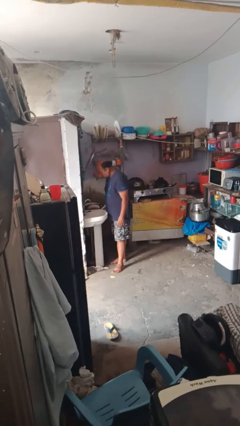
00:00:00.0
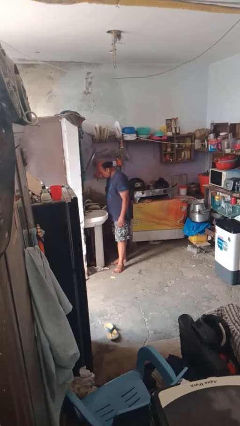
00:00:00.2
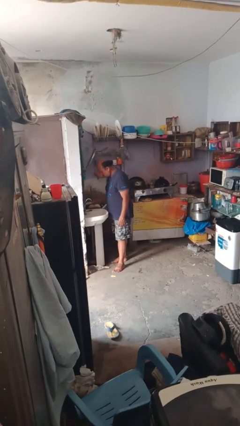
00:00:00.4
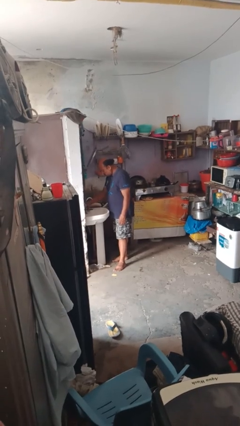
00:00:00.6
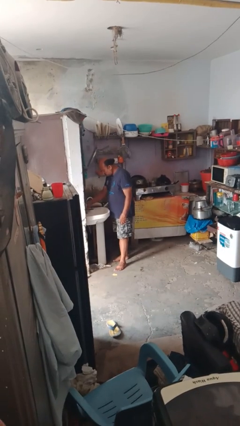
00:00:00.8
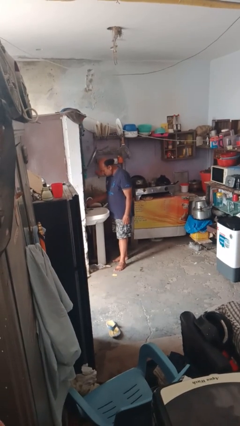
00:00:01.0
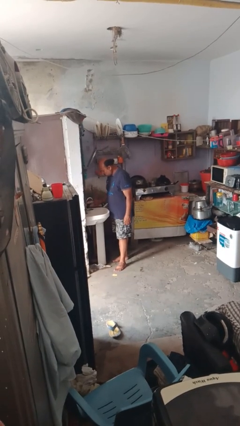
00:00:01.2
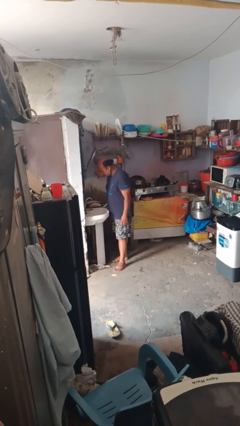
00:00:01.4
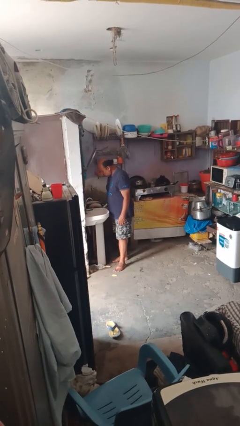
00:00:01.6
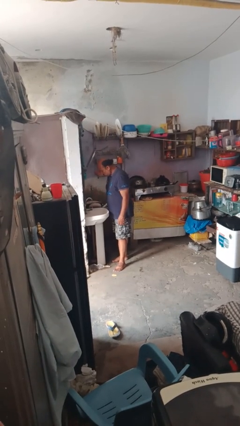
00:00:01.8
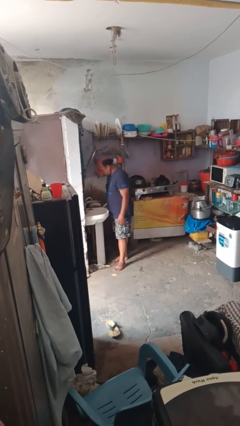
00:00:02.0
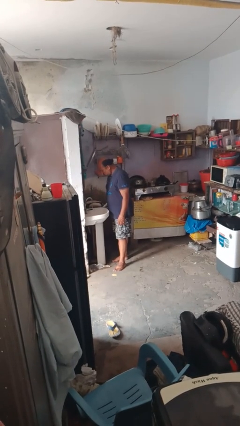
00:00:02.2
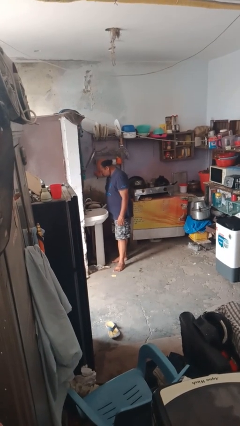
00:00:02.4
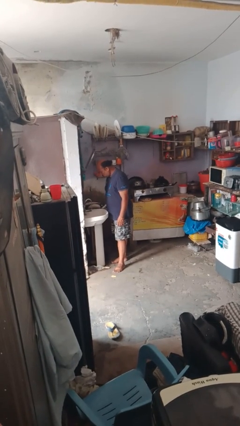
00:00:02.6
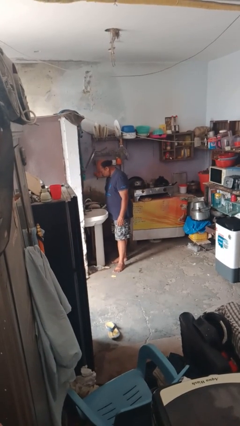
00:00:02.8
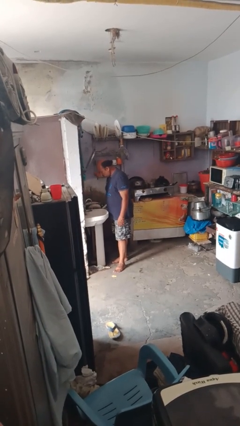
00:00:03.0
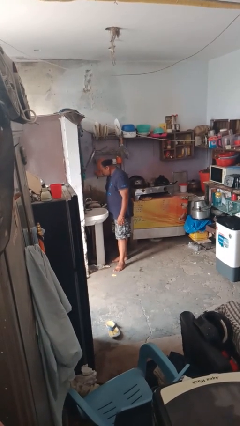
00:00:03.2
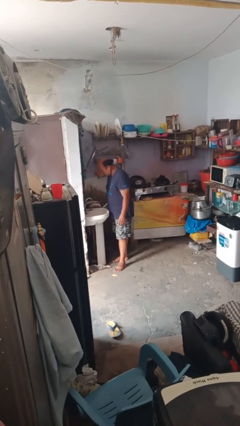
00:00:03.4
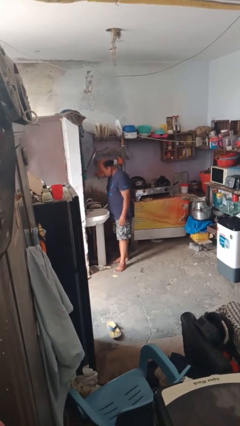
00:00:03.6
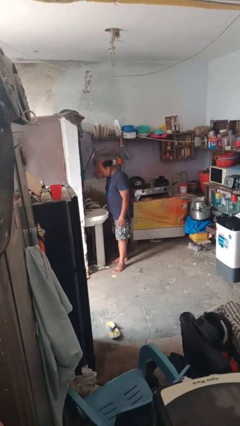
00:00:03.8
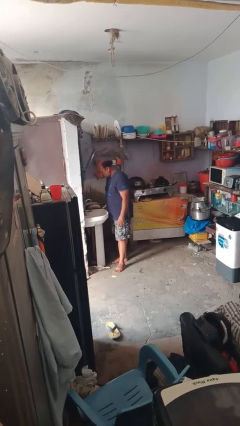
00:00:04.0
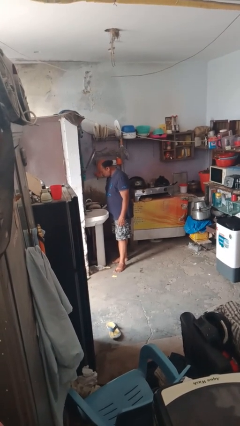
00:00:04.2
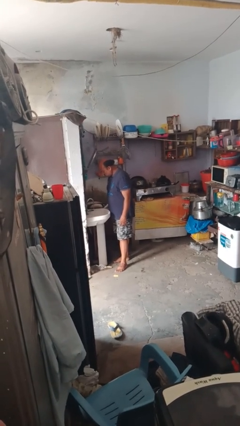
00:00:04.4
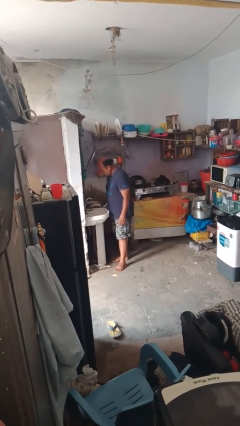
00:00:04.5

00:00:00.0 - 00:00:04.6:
person turns on faucet

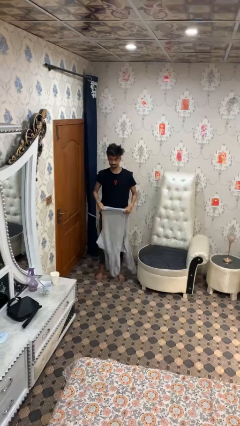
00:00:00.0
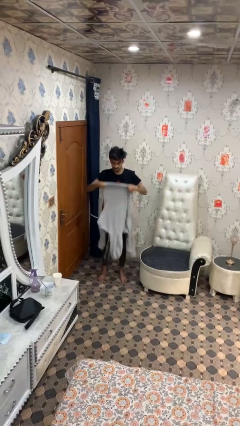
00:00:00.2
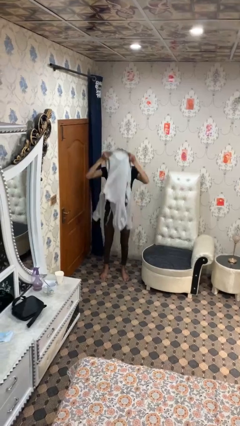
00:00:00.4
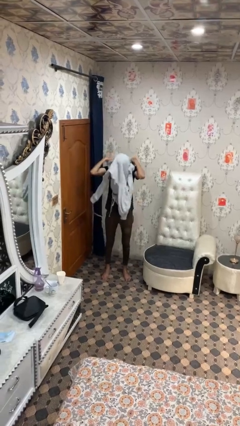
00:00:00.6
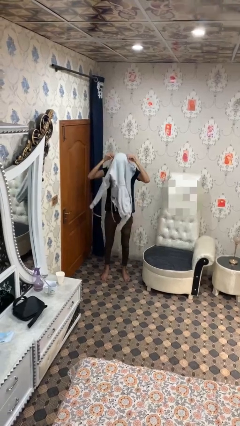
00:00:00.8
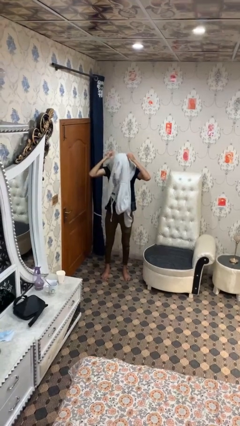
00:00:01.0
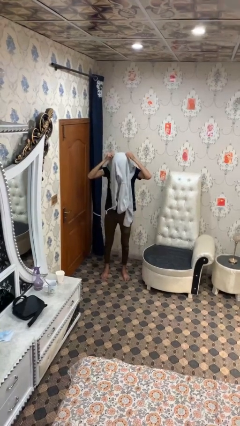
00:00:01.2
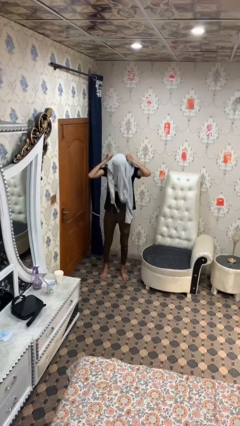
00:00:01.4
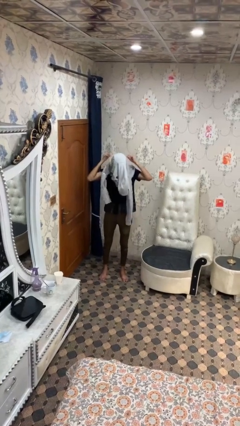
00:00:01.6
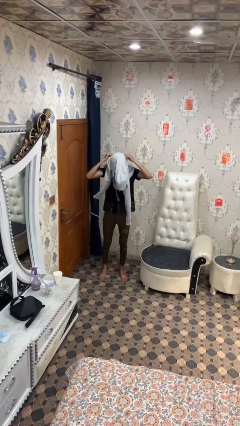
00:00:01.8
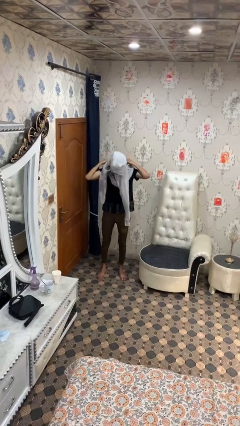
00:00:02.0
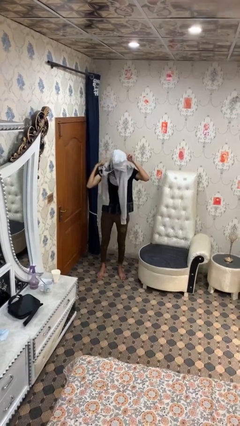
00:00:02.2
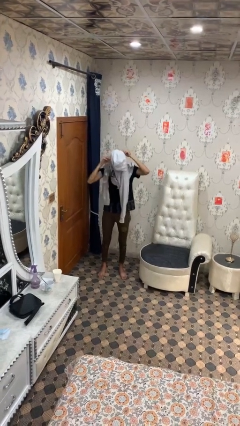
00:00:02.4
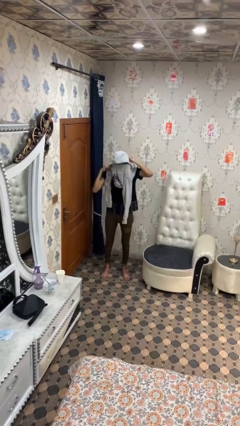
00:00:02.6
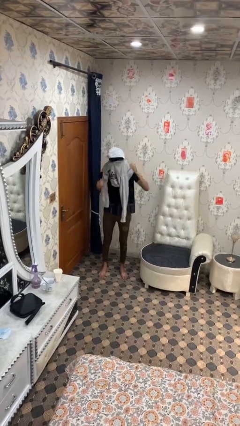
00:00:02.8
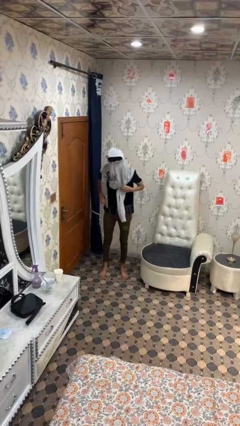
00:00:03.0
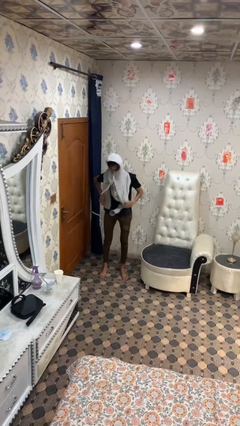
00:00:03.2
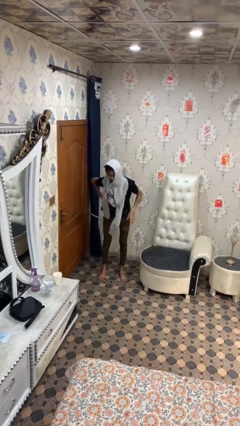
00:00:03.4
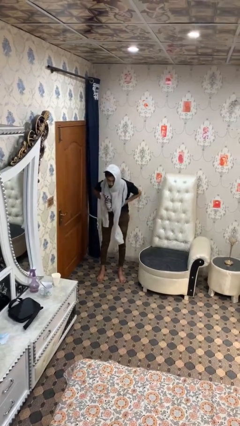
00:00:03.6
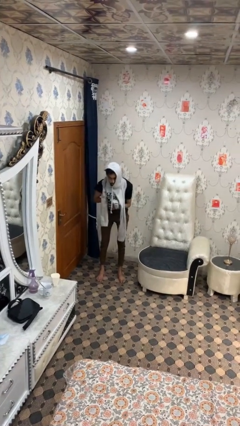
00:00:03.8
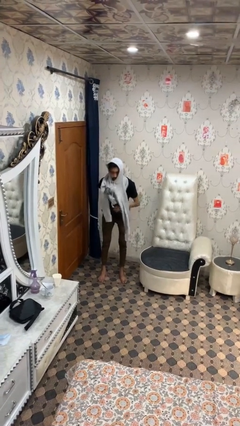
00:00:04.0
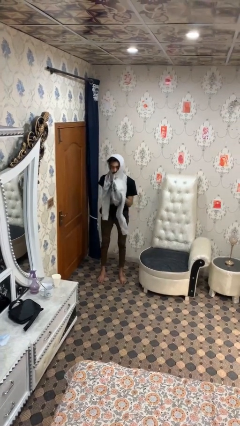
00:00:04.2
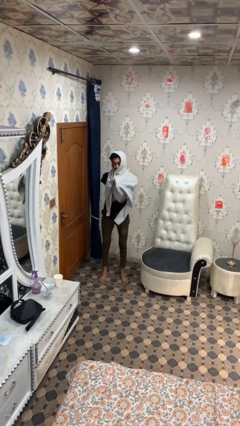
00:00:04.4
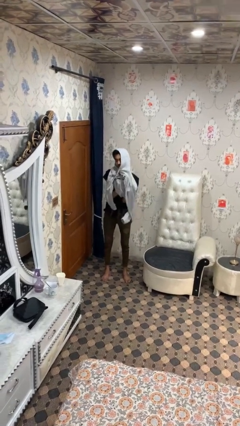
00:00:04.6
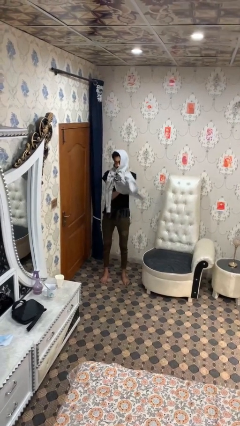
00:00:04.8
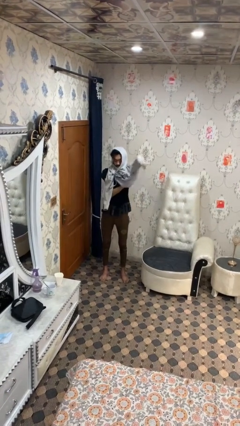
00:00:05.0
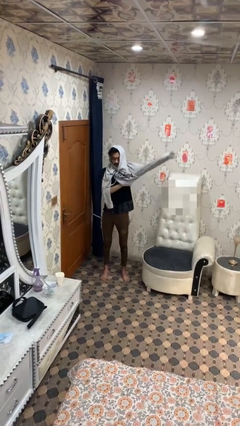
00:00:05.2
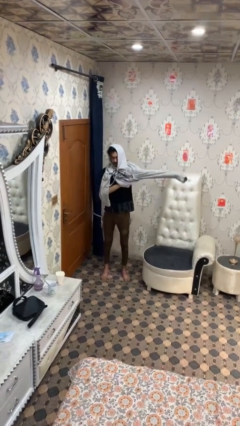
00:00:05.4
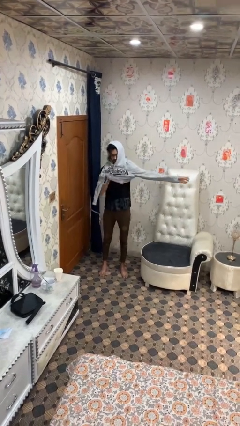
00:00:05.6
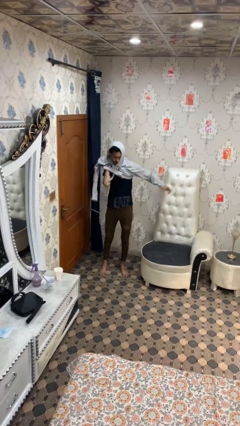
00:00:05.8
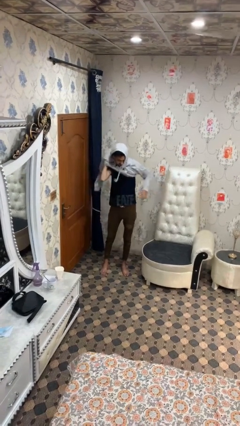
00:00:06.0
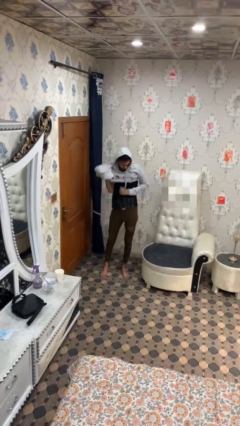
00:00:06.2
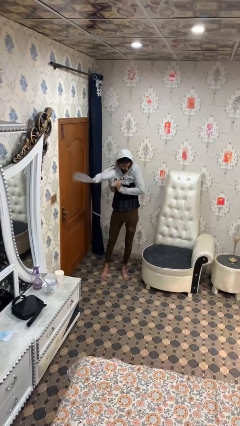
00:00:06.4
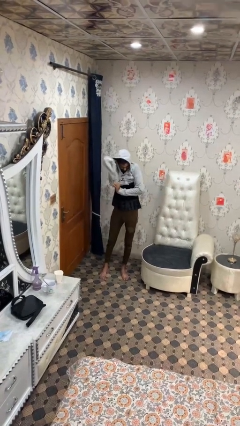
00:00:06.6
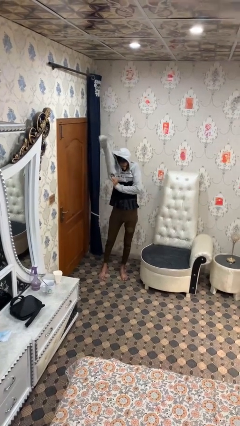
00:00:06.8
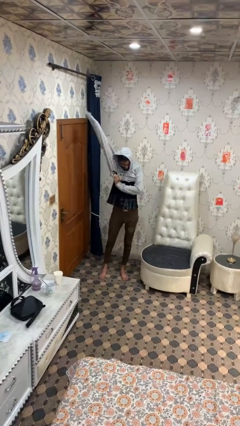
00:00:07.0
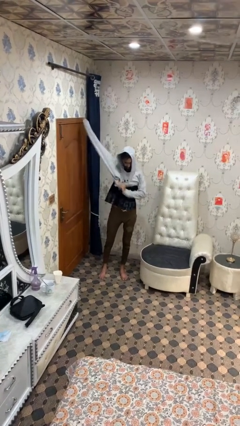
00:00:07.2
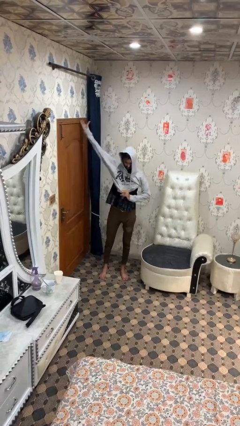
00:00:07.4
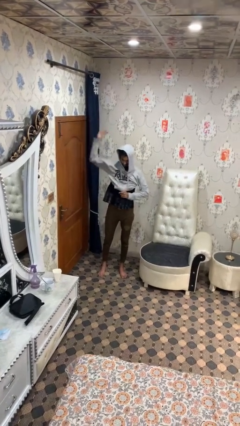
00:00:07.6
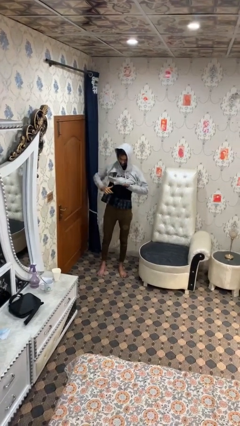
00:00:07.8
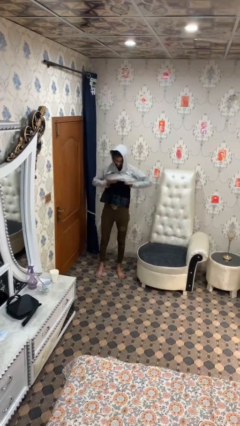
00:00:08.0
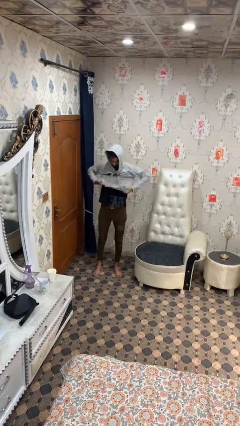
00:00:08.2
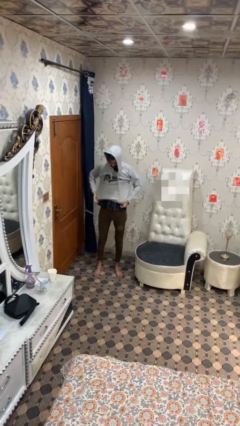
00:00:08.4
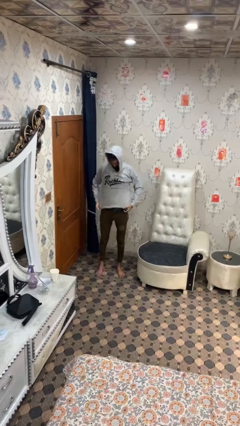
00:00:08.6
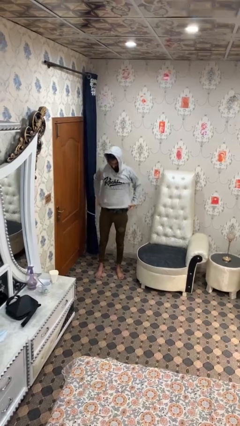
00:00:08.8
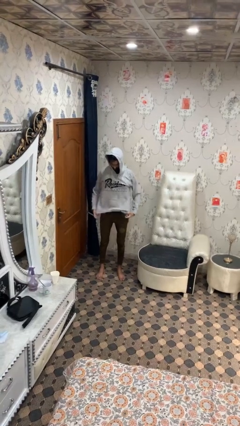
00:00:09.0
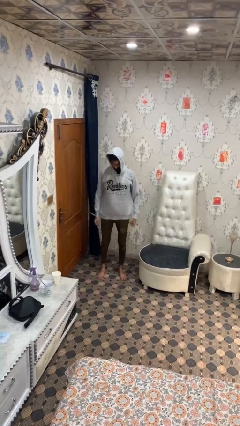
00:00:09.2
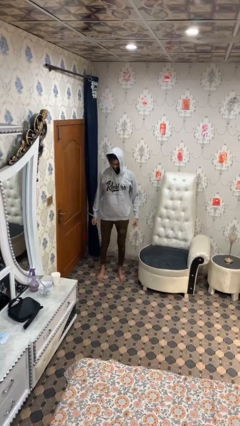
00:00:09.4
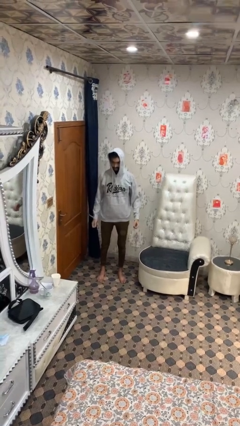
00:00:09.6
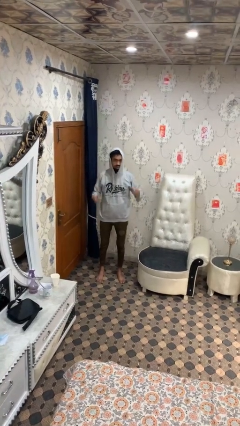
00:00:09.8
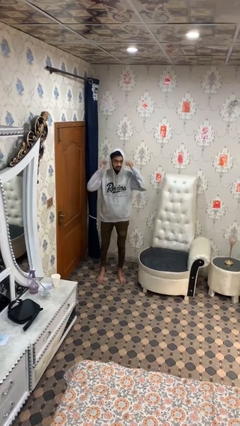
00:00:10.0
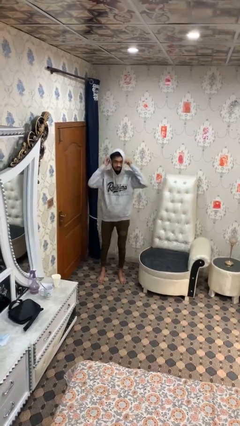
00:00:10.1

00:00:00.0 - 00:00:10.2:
person puts on hoodie

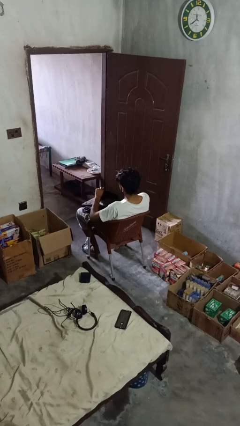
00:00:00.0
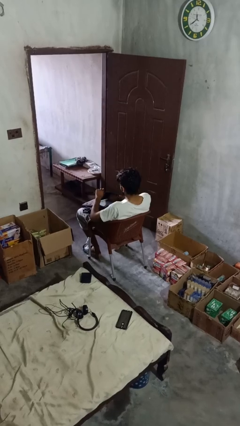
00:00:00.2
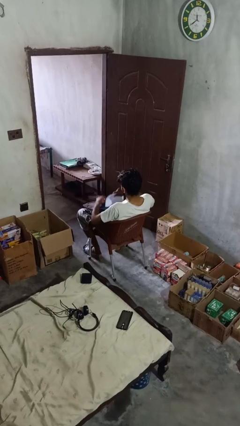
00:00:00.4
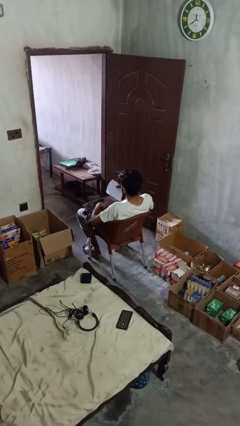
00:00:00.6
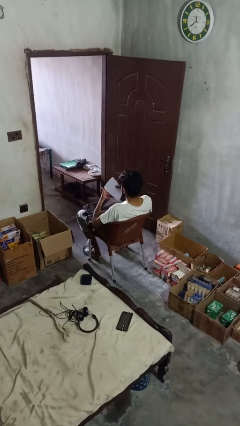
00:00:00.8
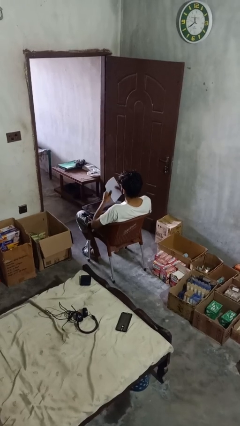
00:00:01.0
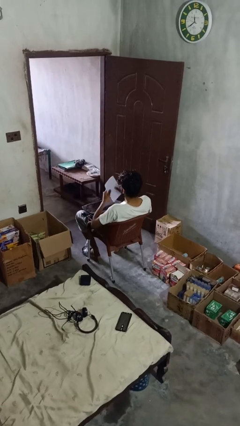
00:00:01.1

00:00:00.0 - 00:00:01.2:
person takes object from backpack

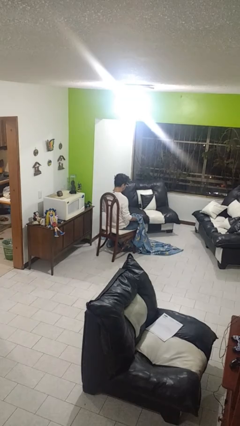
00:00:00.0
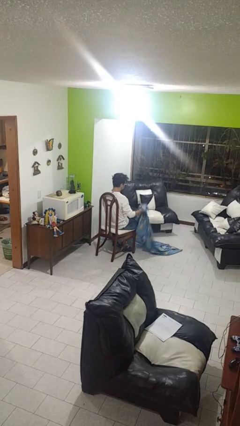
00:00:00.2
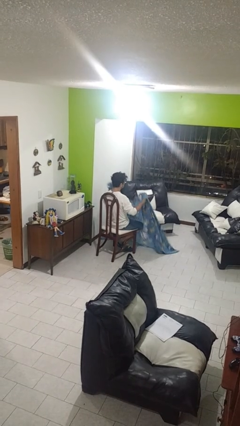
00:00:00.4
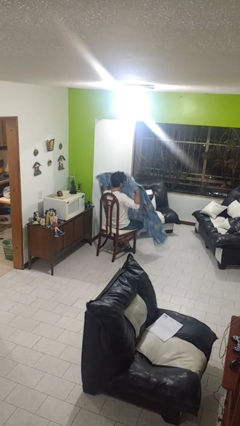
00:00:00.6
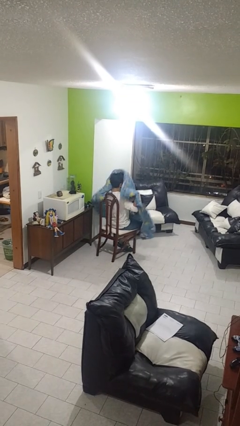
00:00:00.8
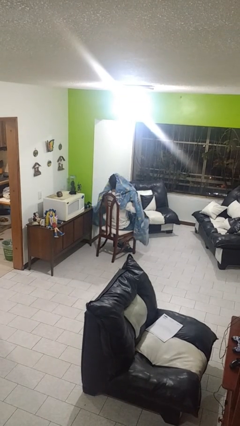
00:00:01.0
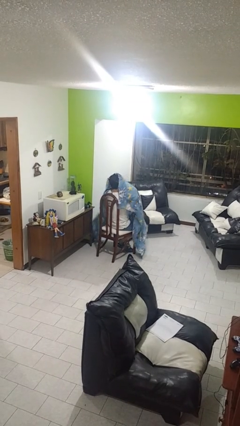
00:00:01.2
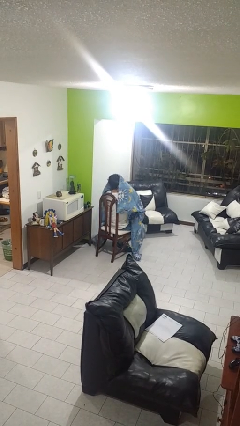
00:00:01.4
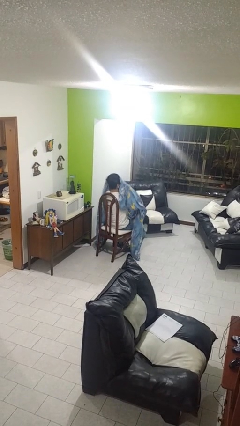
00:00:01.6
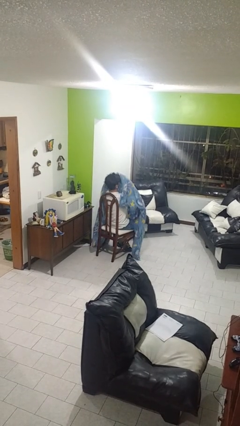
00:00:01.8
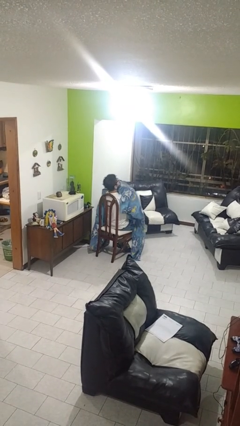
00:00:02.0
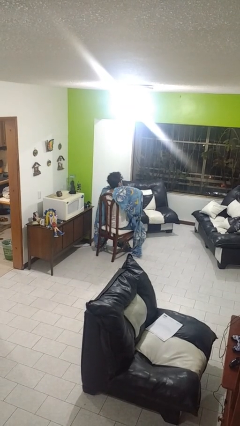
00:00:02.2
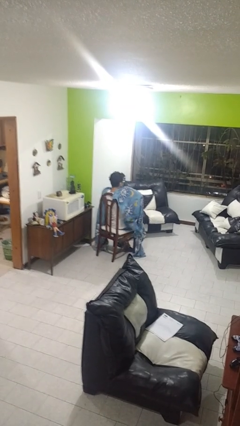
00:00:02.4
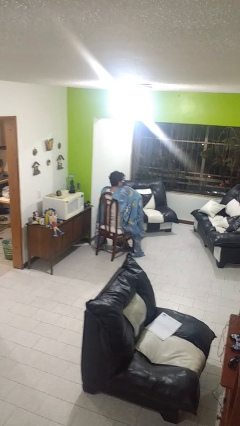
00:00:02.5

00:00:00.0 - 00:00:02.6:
person covers with blanket
